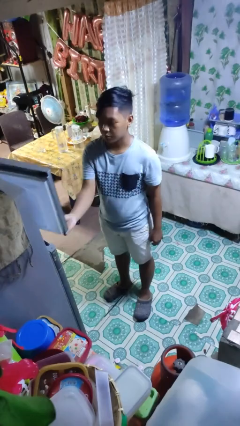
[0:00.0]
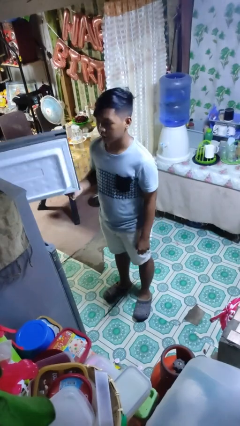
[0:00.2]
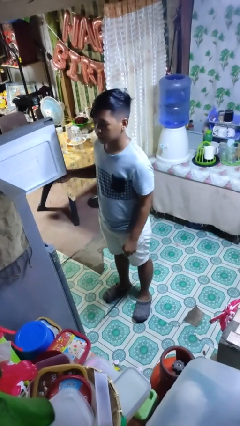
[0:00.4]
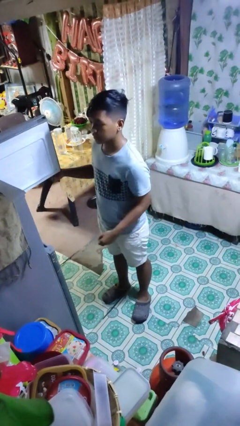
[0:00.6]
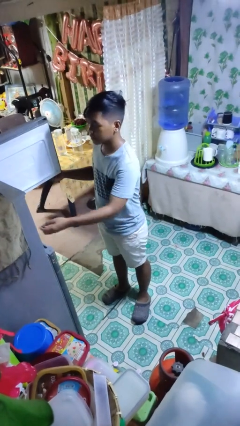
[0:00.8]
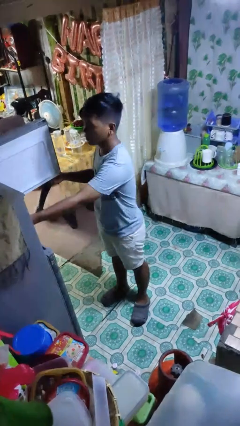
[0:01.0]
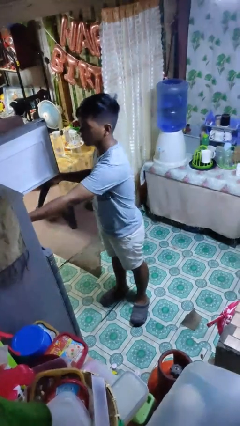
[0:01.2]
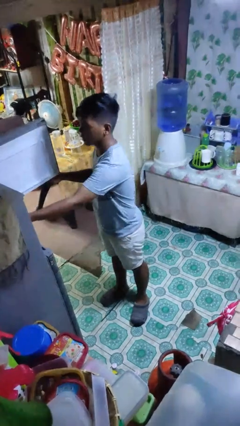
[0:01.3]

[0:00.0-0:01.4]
person opens refrigerator

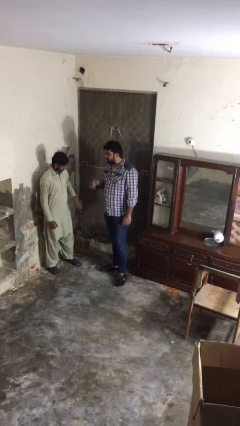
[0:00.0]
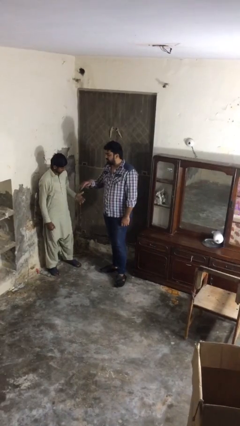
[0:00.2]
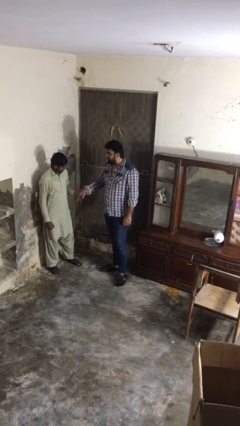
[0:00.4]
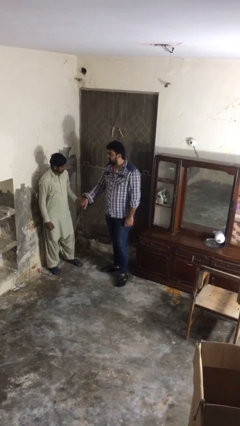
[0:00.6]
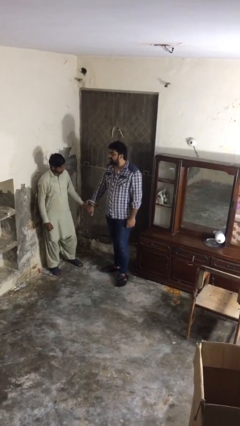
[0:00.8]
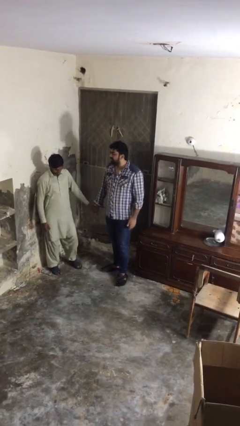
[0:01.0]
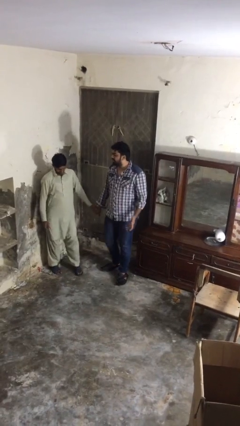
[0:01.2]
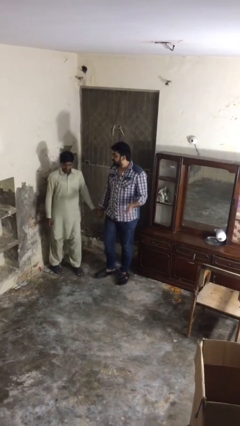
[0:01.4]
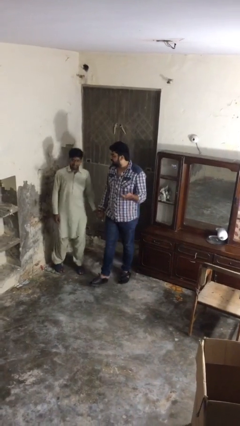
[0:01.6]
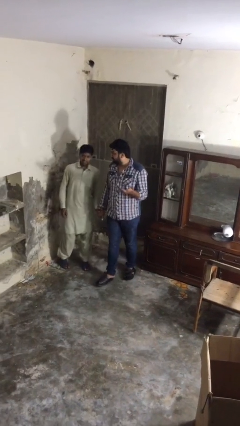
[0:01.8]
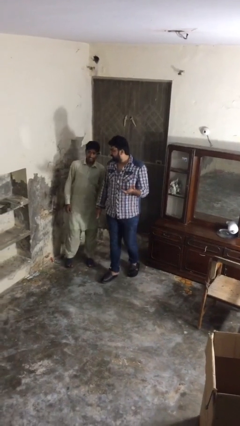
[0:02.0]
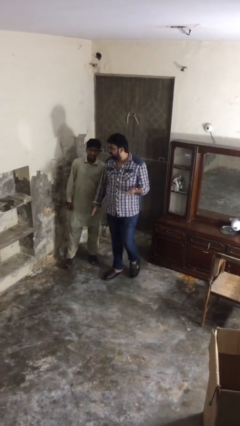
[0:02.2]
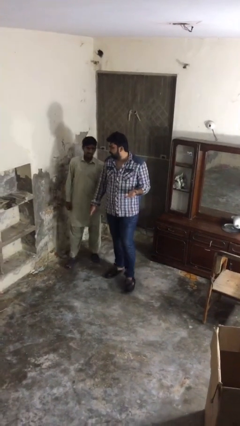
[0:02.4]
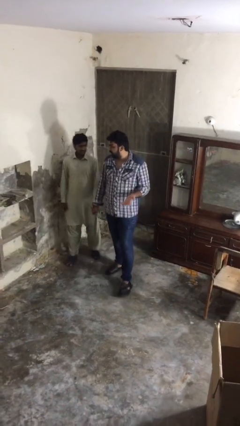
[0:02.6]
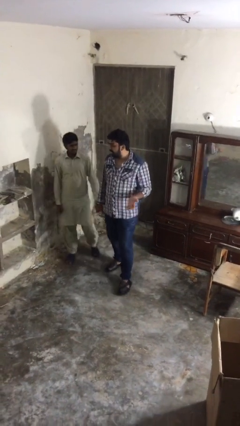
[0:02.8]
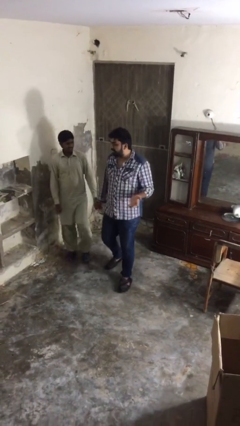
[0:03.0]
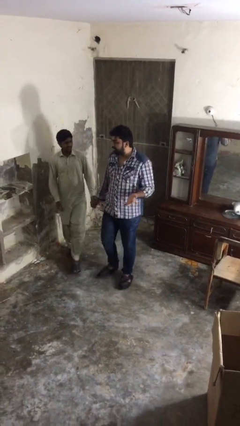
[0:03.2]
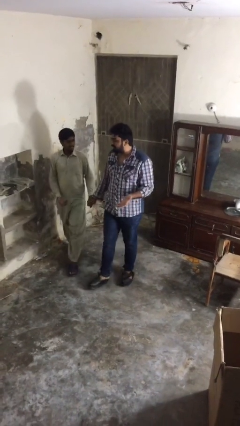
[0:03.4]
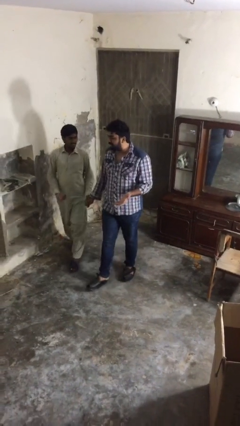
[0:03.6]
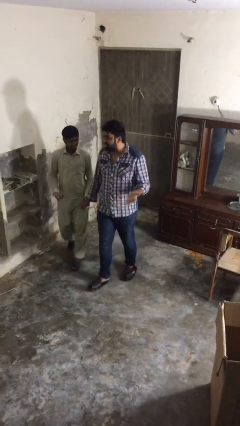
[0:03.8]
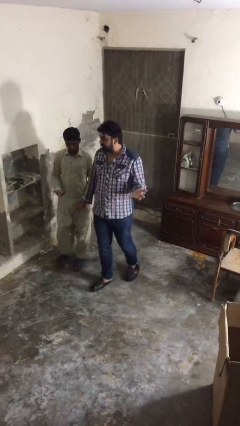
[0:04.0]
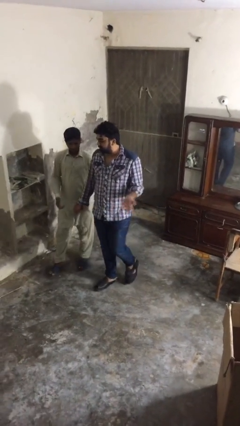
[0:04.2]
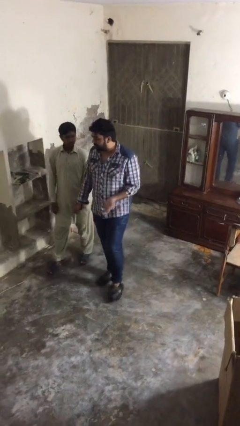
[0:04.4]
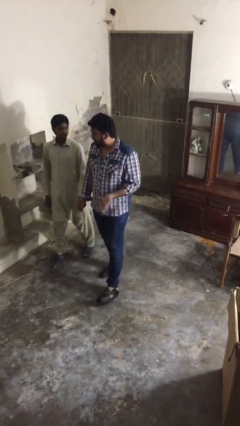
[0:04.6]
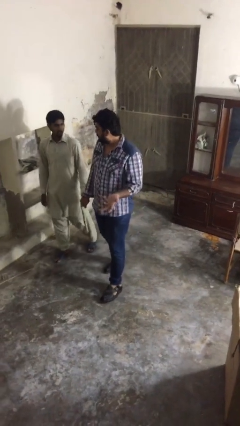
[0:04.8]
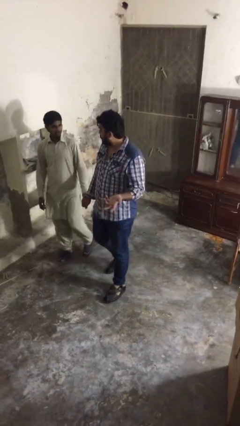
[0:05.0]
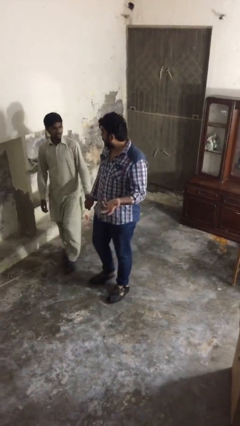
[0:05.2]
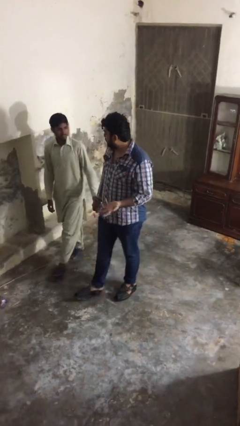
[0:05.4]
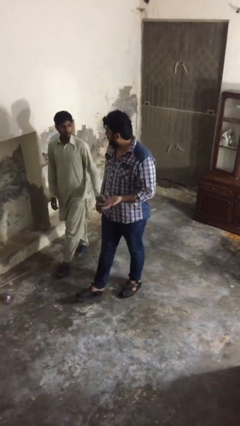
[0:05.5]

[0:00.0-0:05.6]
person holds hand

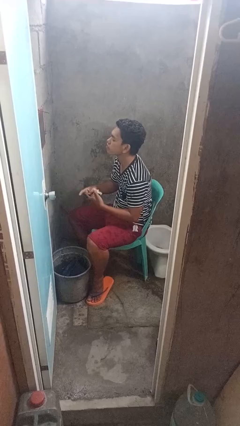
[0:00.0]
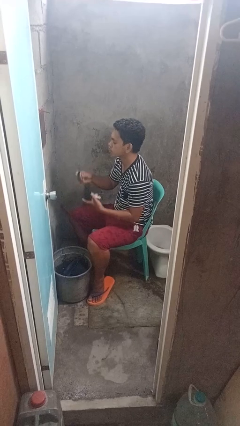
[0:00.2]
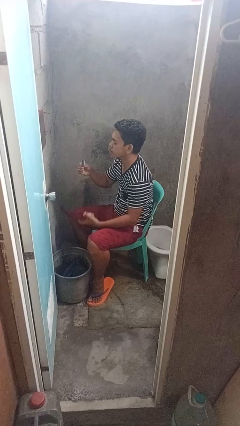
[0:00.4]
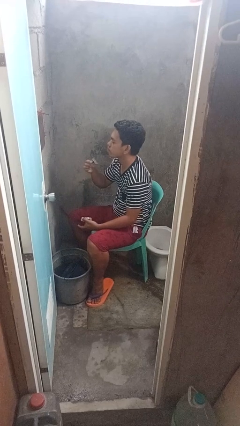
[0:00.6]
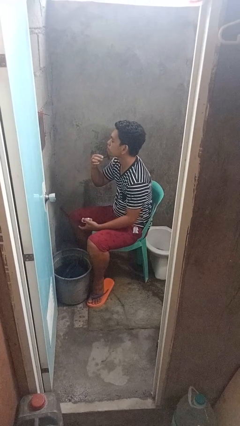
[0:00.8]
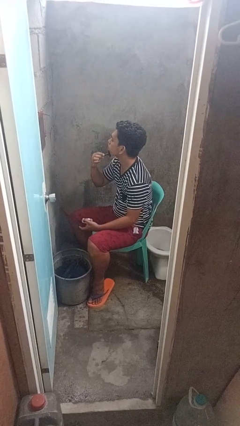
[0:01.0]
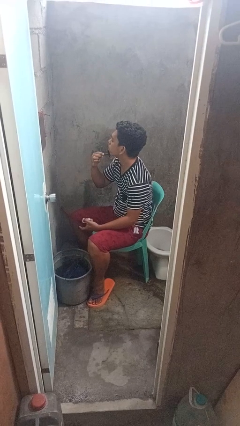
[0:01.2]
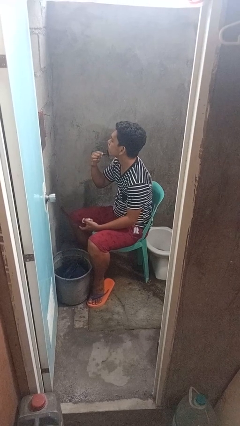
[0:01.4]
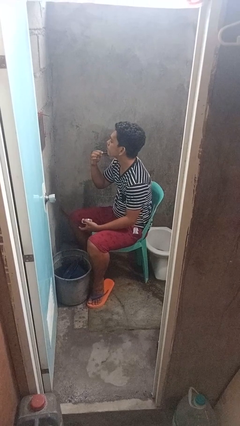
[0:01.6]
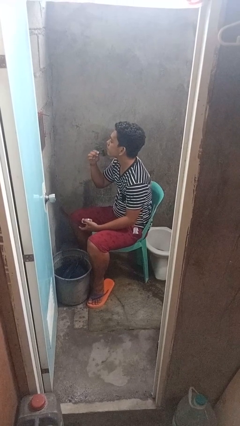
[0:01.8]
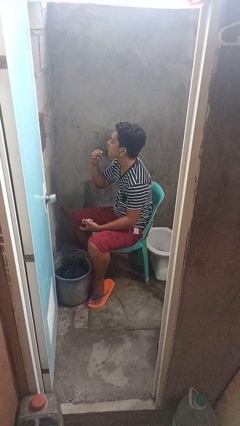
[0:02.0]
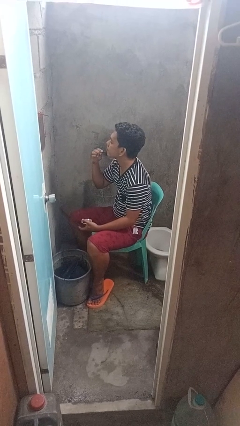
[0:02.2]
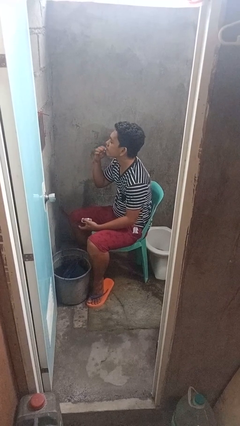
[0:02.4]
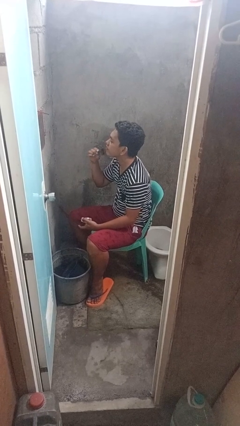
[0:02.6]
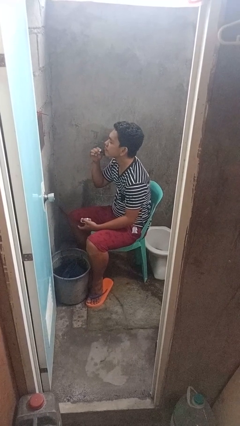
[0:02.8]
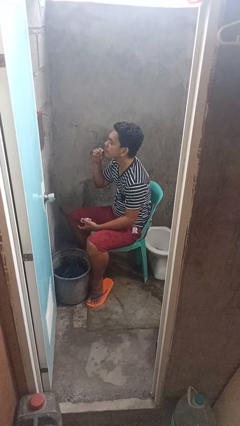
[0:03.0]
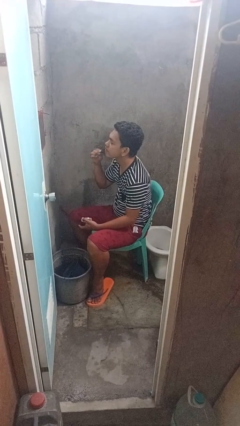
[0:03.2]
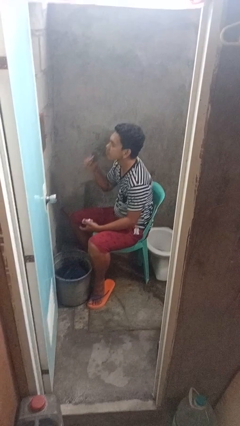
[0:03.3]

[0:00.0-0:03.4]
person shaves face

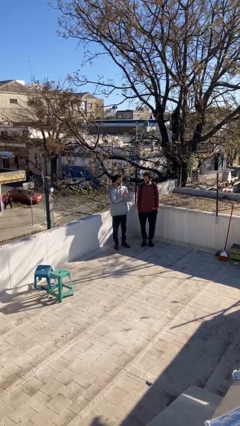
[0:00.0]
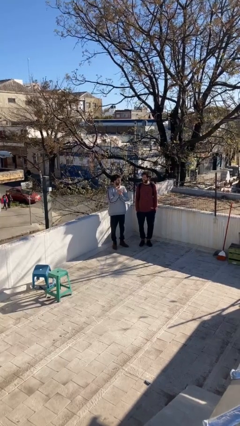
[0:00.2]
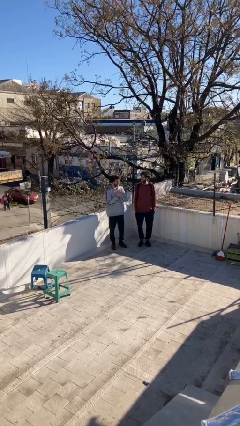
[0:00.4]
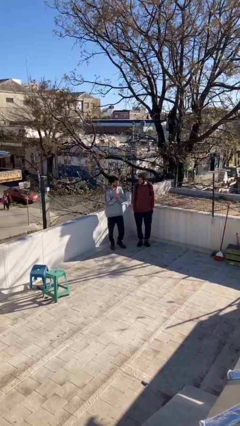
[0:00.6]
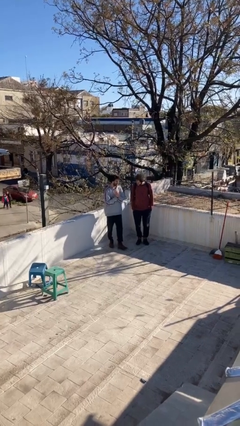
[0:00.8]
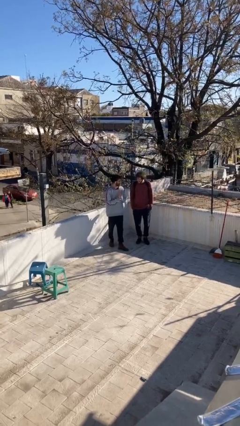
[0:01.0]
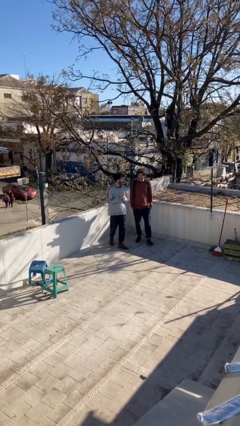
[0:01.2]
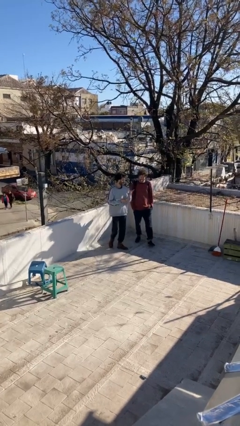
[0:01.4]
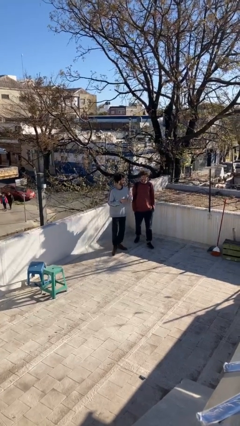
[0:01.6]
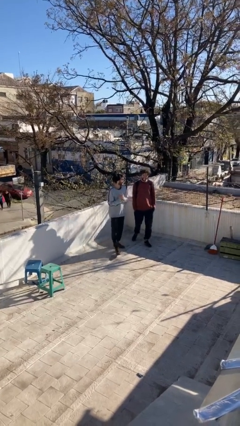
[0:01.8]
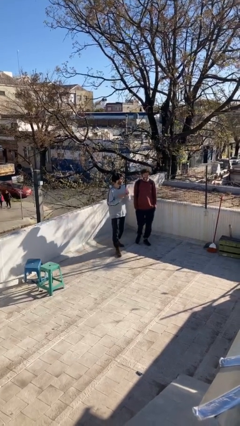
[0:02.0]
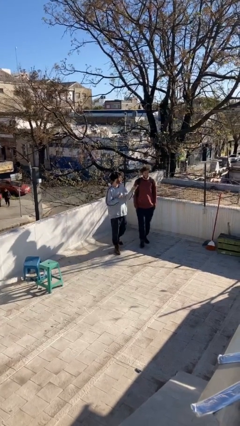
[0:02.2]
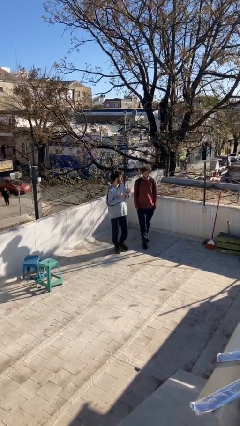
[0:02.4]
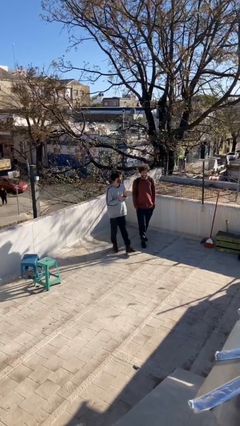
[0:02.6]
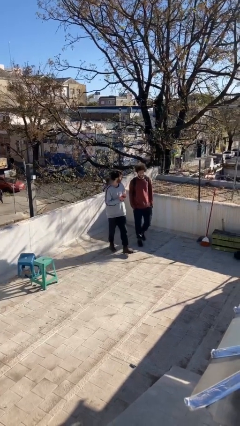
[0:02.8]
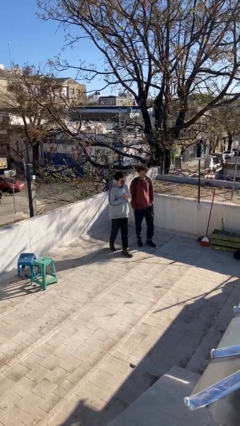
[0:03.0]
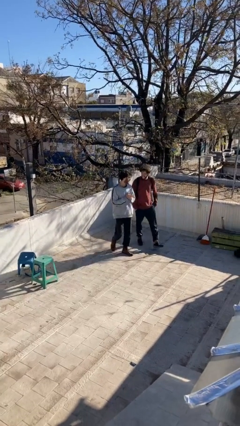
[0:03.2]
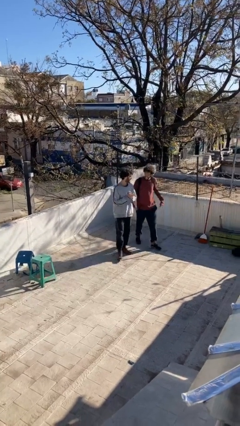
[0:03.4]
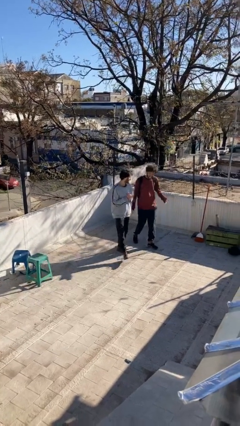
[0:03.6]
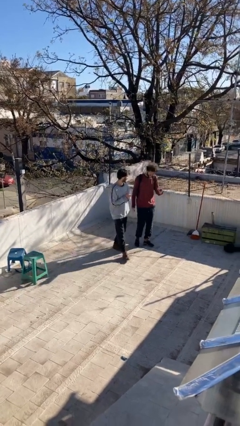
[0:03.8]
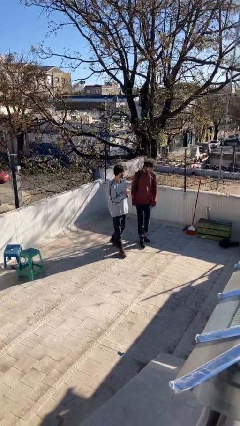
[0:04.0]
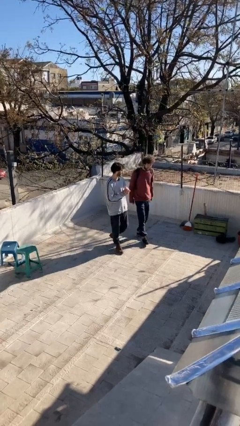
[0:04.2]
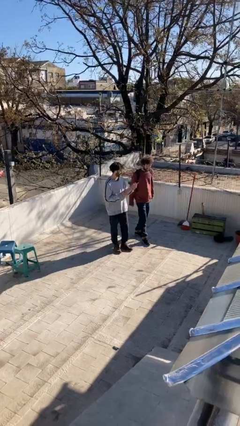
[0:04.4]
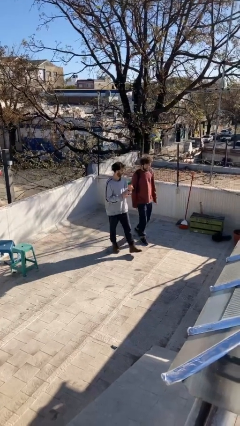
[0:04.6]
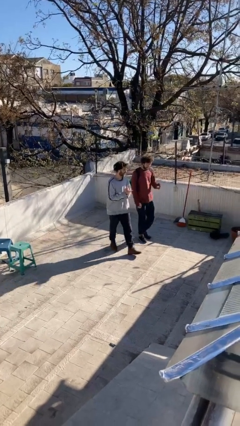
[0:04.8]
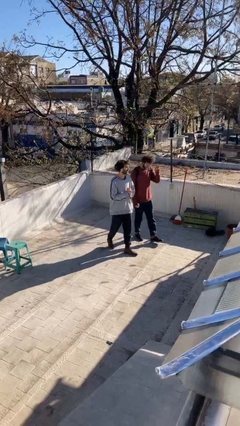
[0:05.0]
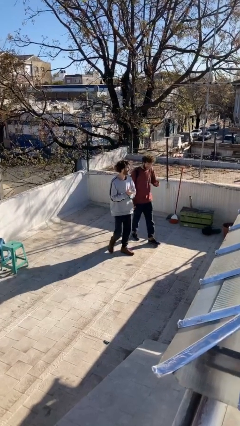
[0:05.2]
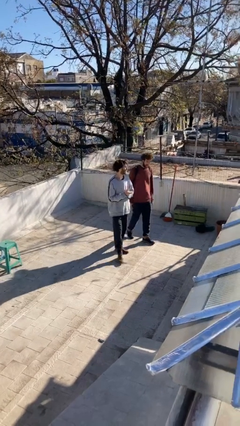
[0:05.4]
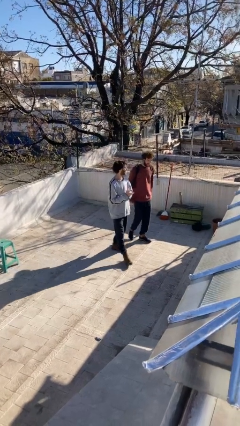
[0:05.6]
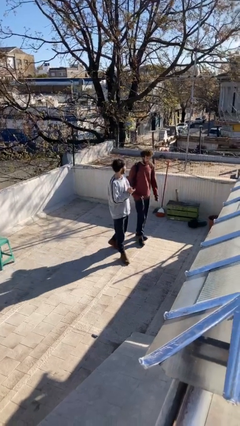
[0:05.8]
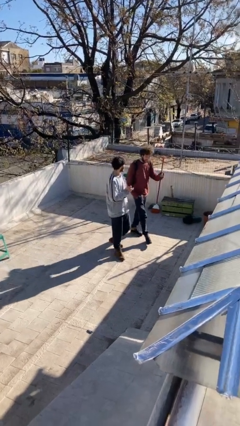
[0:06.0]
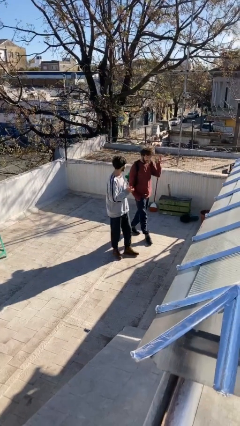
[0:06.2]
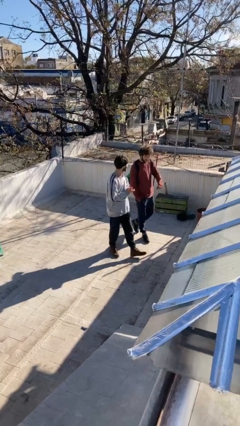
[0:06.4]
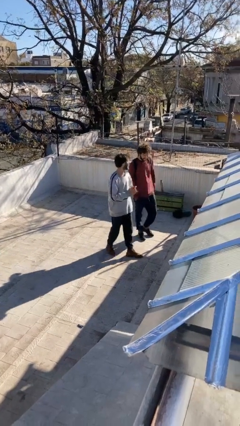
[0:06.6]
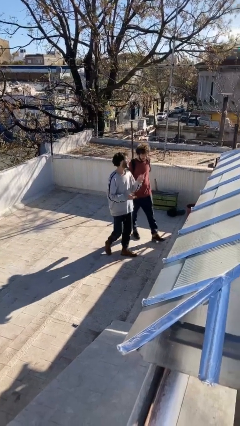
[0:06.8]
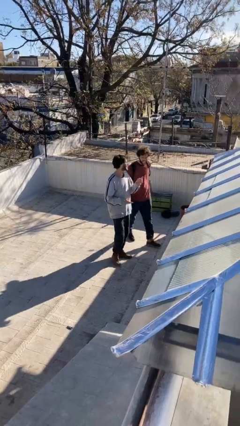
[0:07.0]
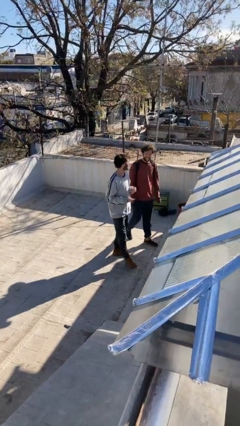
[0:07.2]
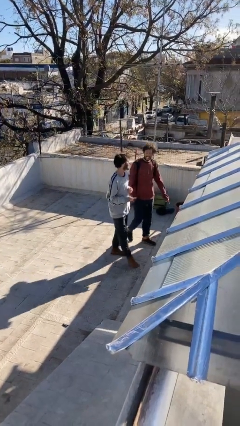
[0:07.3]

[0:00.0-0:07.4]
person talks to person
